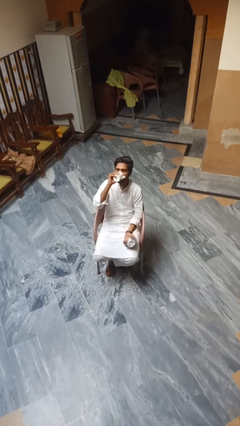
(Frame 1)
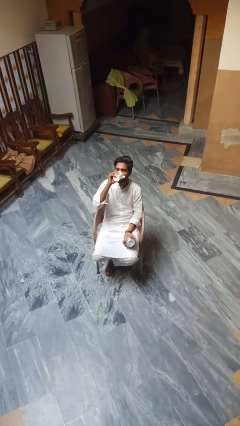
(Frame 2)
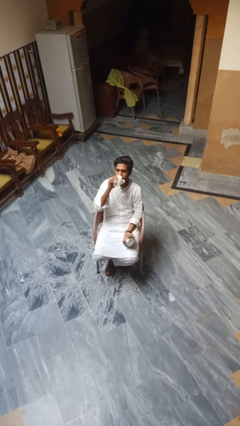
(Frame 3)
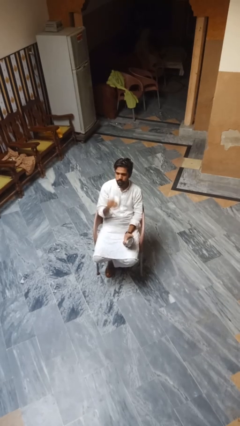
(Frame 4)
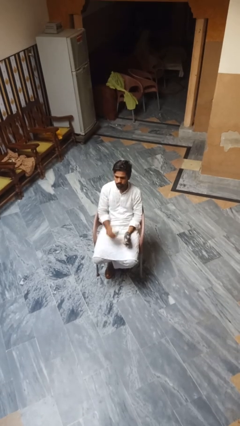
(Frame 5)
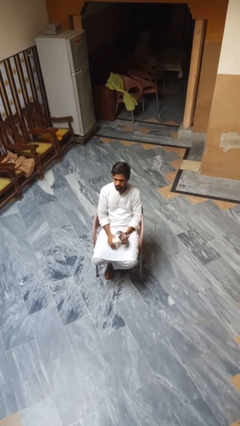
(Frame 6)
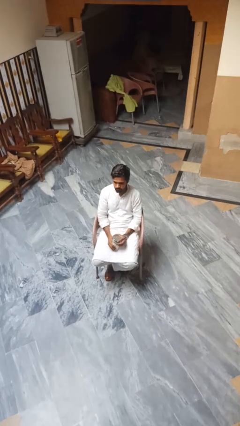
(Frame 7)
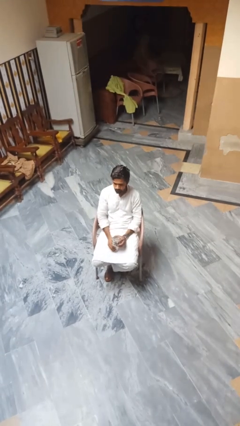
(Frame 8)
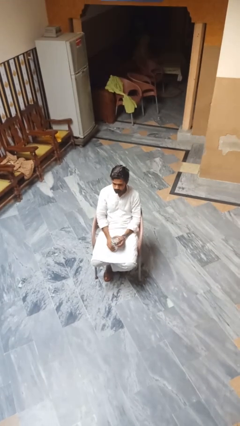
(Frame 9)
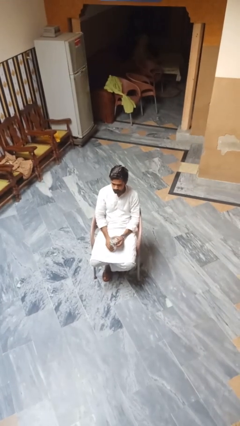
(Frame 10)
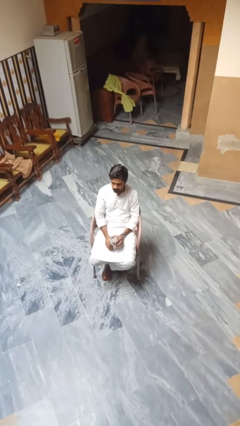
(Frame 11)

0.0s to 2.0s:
person drinks from beverage can

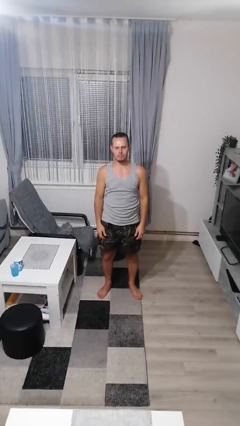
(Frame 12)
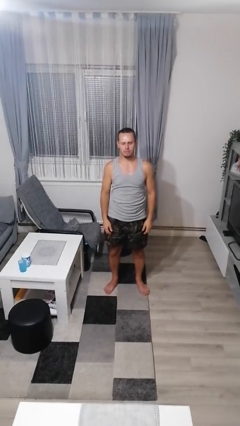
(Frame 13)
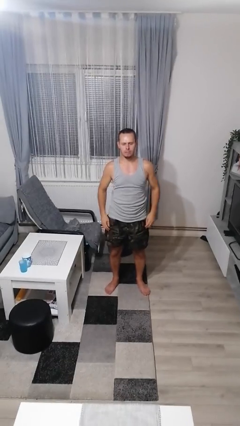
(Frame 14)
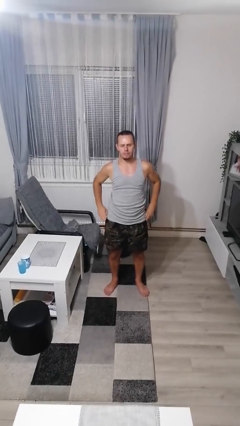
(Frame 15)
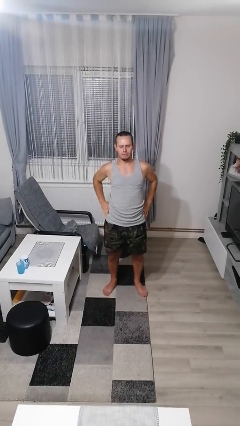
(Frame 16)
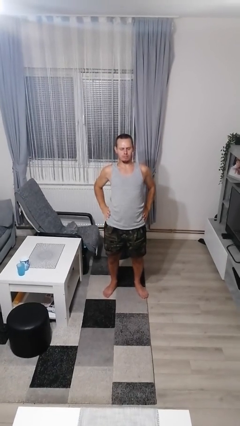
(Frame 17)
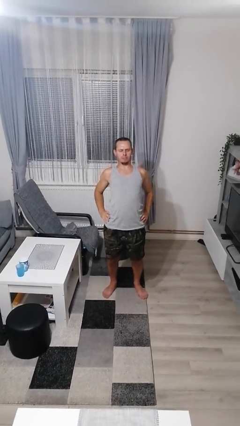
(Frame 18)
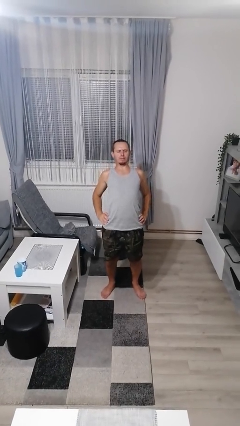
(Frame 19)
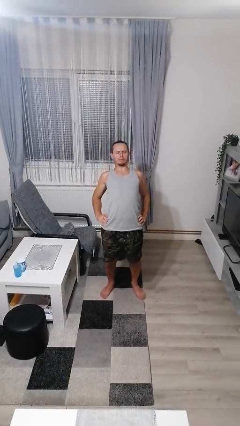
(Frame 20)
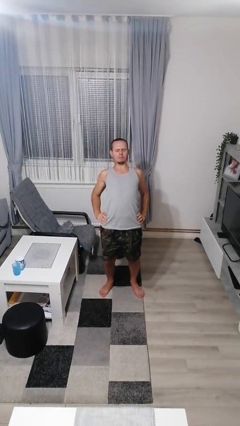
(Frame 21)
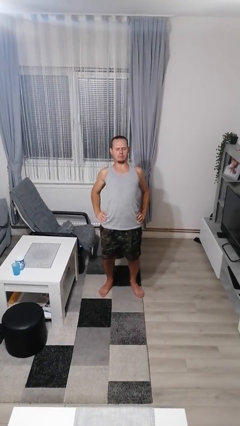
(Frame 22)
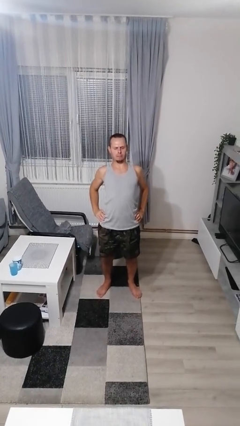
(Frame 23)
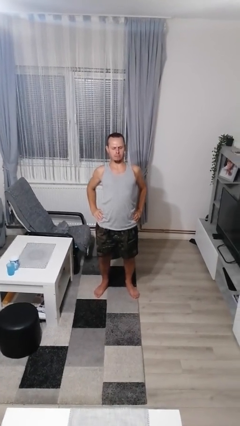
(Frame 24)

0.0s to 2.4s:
person stretches back

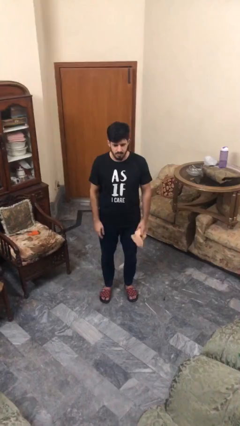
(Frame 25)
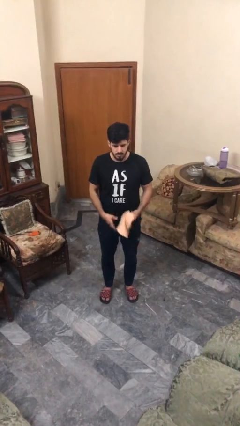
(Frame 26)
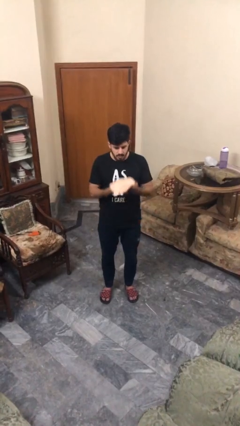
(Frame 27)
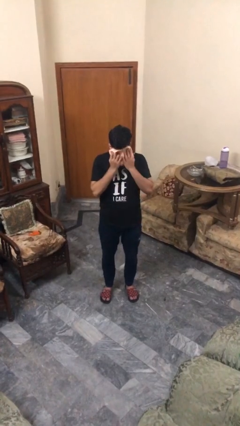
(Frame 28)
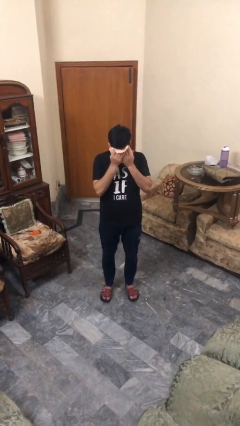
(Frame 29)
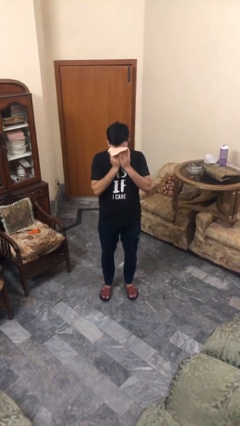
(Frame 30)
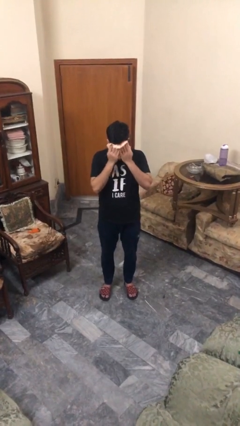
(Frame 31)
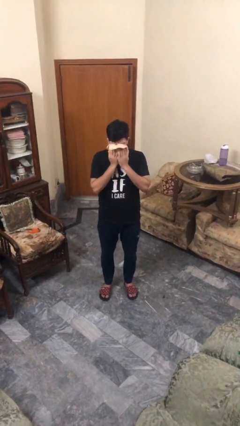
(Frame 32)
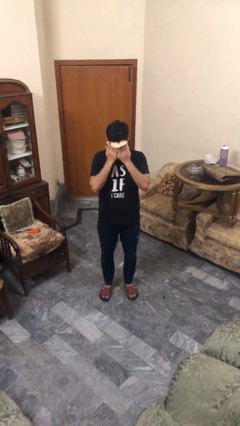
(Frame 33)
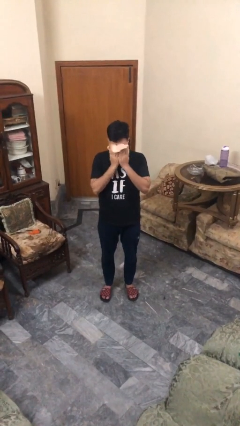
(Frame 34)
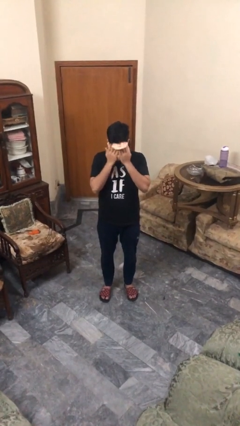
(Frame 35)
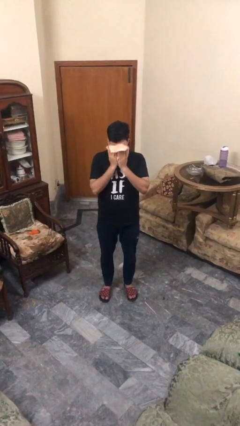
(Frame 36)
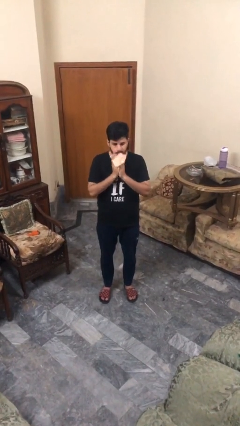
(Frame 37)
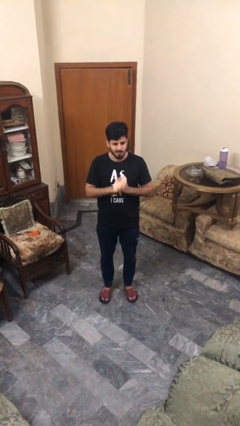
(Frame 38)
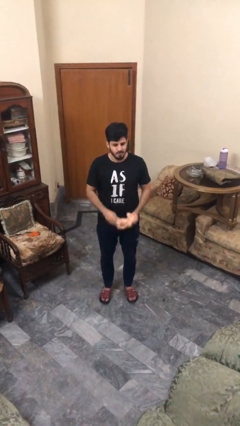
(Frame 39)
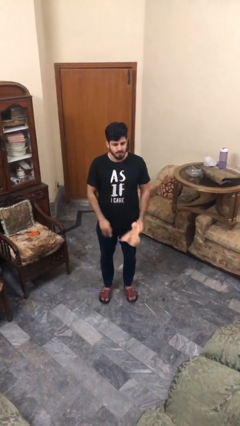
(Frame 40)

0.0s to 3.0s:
person wipes mouth with napkin

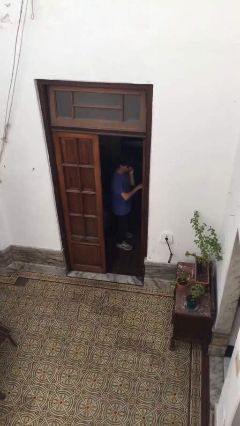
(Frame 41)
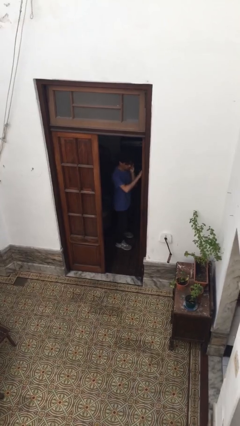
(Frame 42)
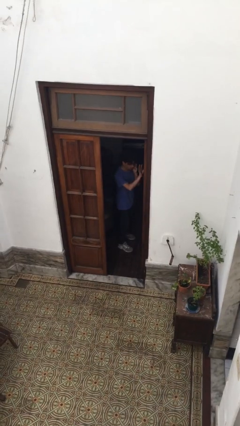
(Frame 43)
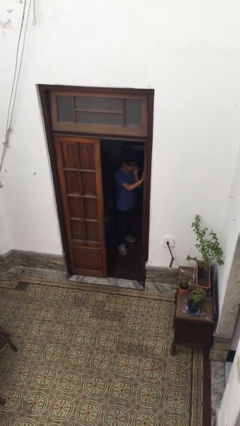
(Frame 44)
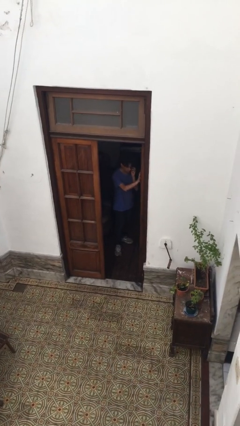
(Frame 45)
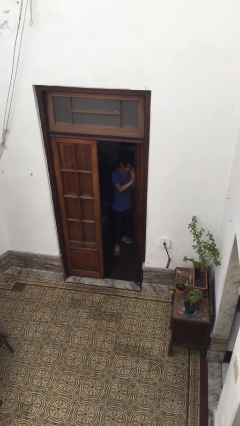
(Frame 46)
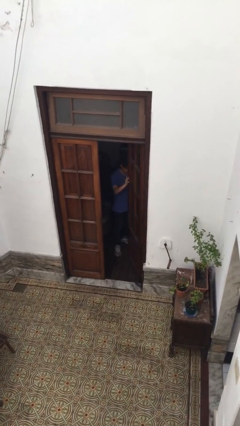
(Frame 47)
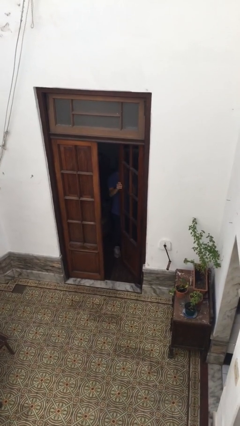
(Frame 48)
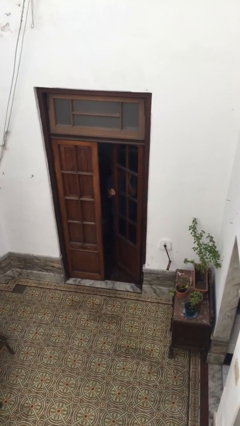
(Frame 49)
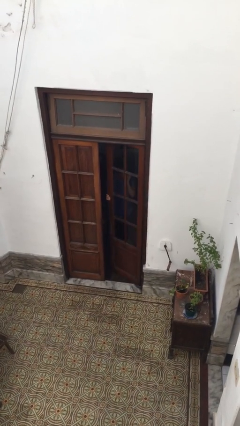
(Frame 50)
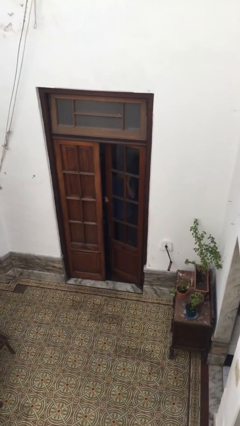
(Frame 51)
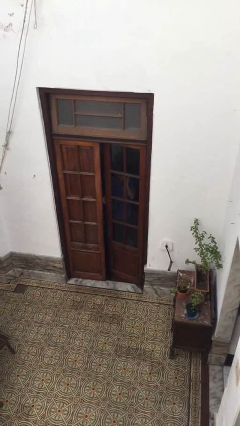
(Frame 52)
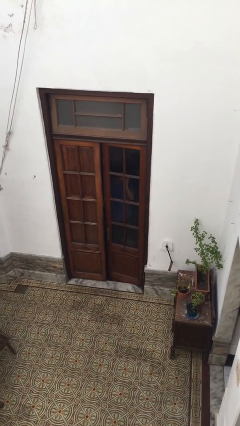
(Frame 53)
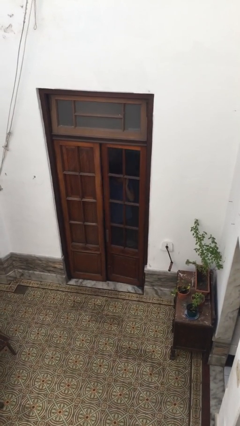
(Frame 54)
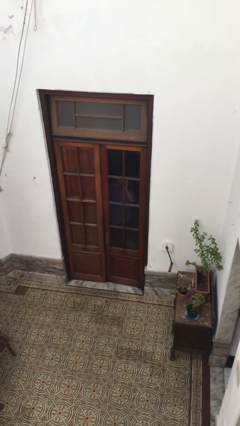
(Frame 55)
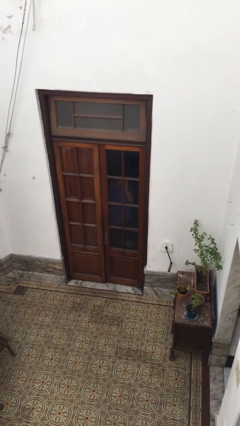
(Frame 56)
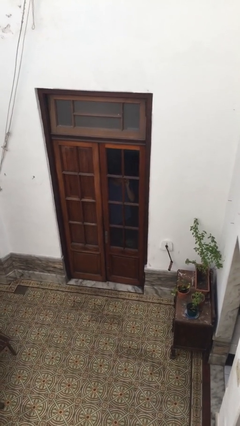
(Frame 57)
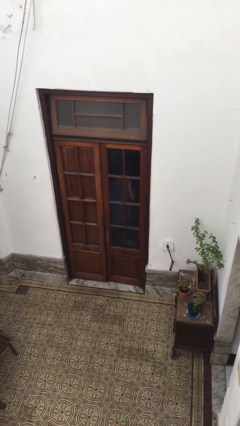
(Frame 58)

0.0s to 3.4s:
person closes facility door

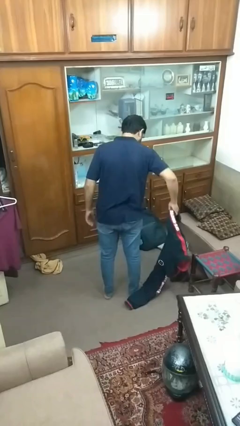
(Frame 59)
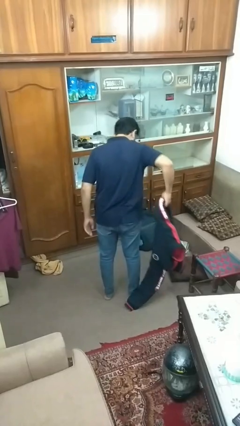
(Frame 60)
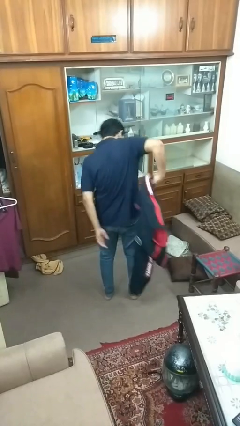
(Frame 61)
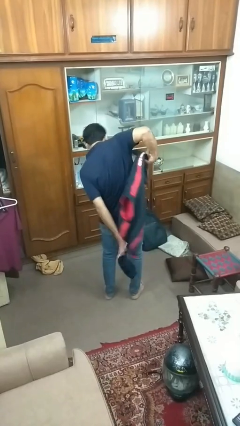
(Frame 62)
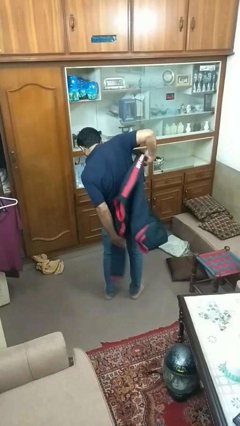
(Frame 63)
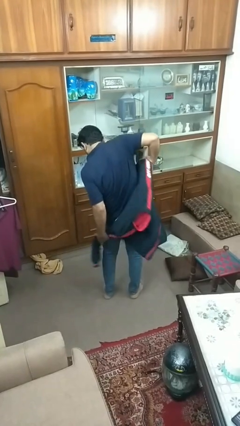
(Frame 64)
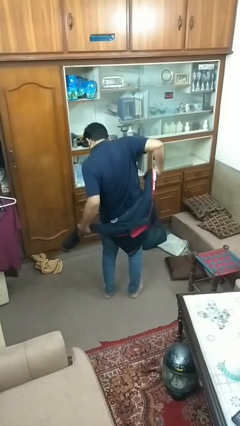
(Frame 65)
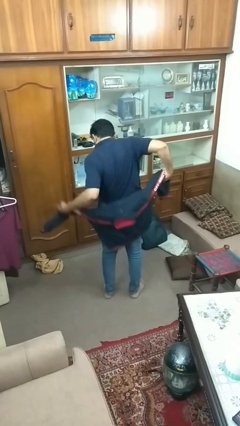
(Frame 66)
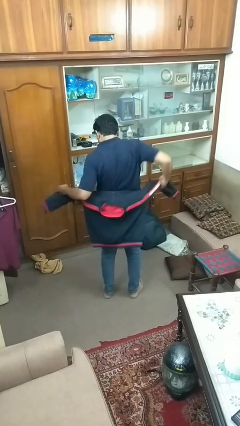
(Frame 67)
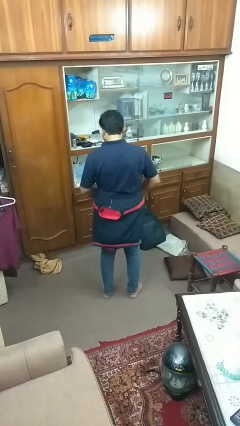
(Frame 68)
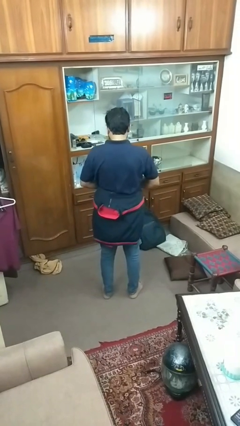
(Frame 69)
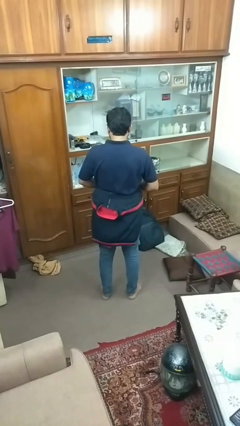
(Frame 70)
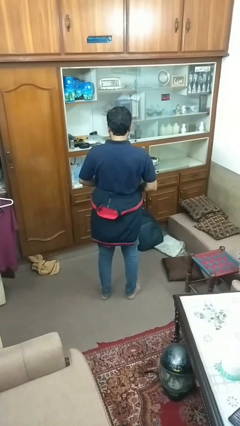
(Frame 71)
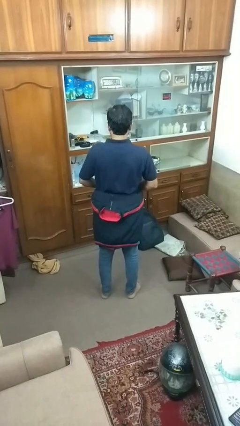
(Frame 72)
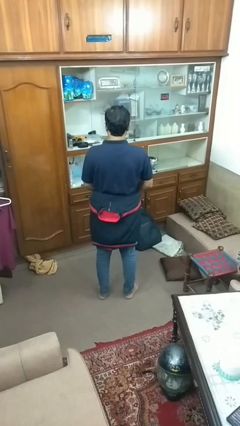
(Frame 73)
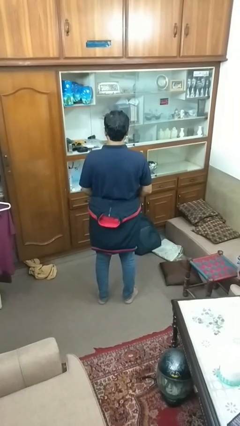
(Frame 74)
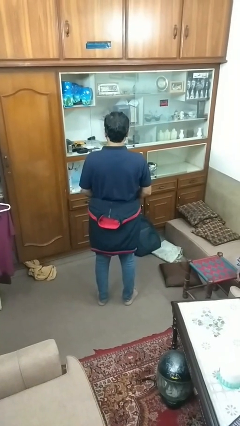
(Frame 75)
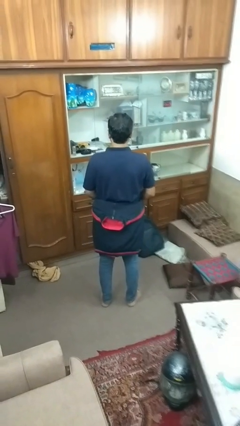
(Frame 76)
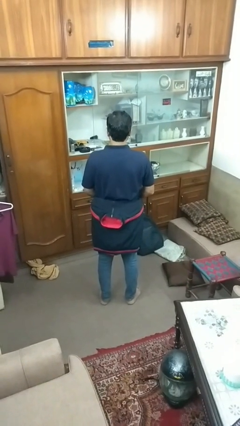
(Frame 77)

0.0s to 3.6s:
person ties jacket around waist

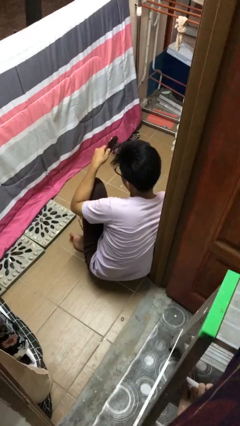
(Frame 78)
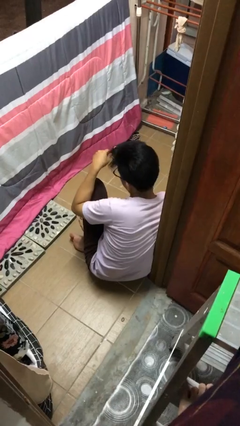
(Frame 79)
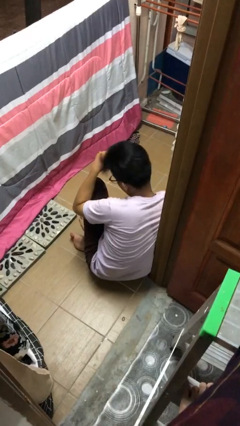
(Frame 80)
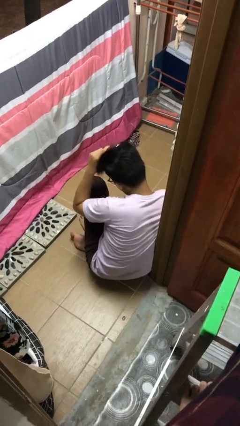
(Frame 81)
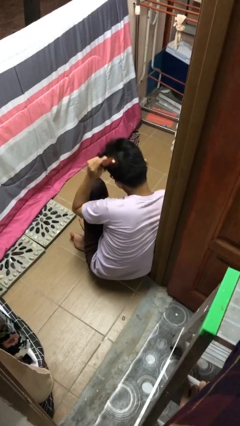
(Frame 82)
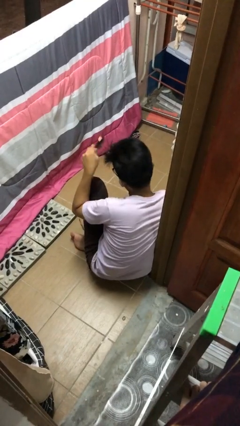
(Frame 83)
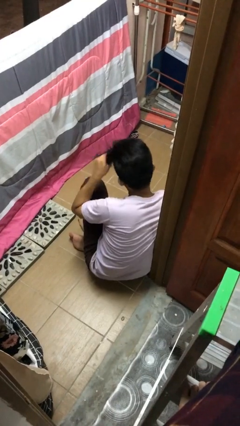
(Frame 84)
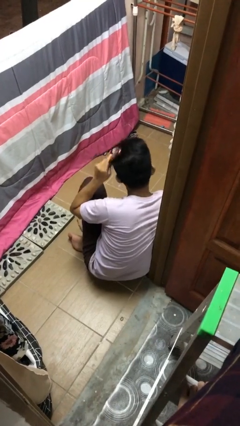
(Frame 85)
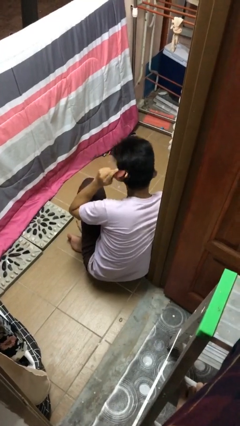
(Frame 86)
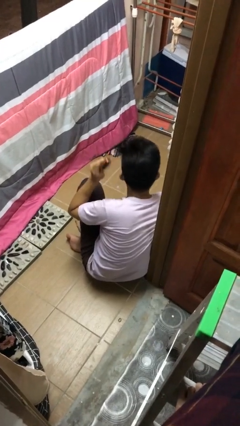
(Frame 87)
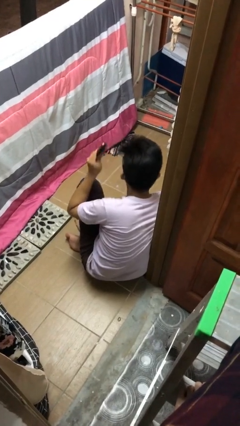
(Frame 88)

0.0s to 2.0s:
person brushes hair

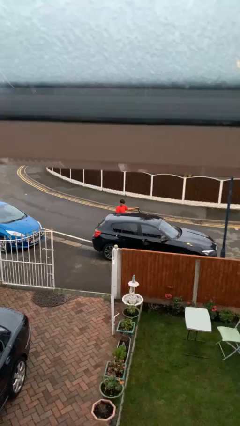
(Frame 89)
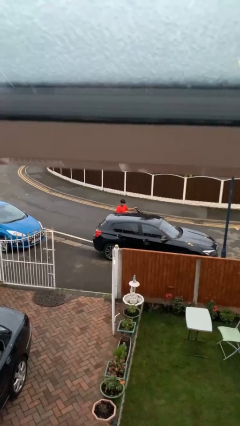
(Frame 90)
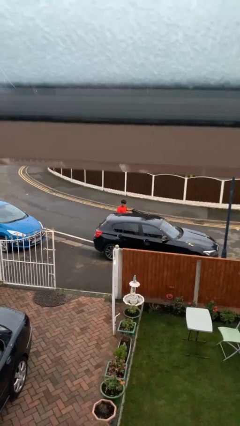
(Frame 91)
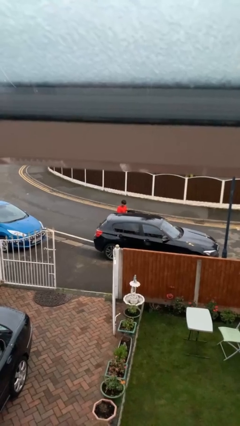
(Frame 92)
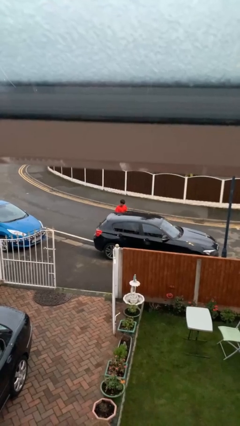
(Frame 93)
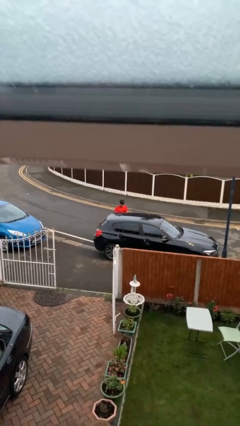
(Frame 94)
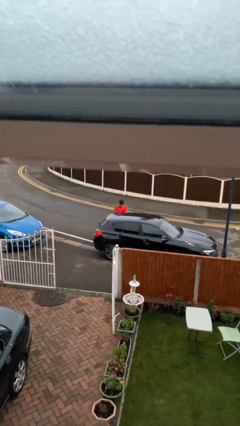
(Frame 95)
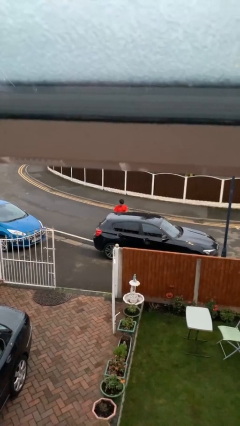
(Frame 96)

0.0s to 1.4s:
person closes car door
